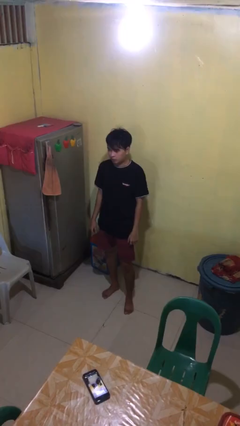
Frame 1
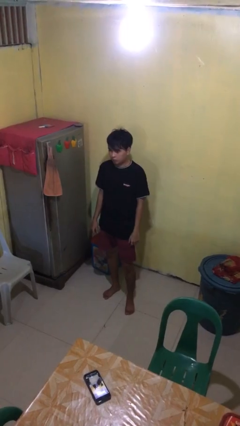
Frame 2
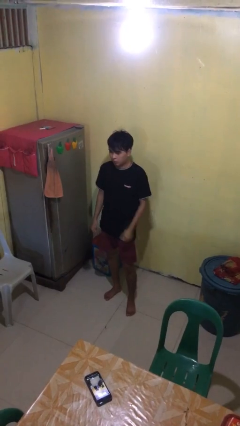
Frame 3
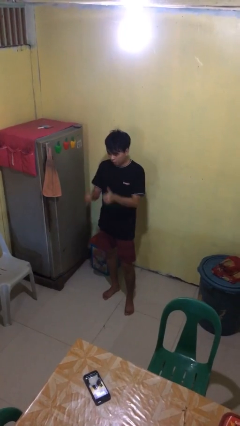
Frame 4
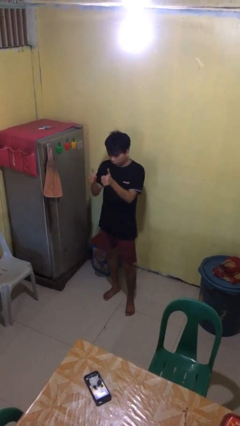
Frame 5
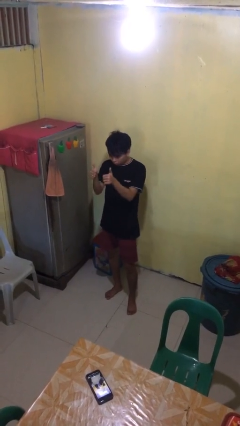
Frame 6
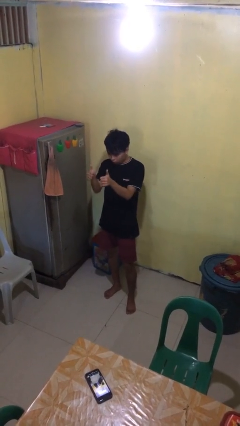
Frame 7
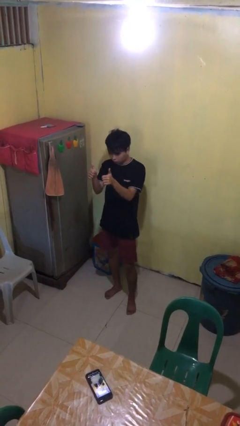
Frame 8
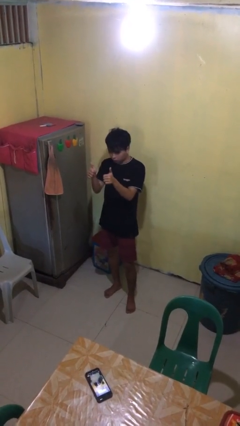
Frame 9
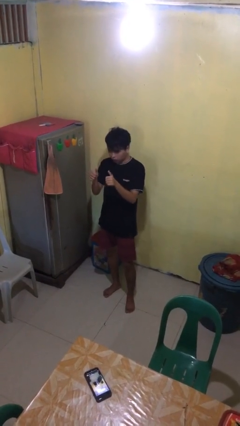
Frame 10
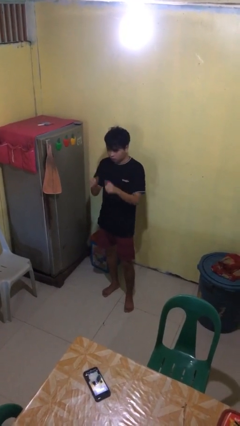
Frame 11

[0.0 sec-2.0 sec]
person gestures thumbs up

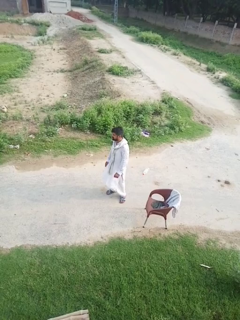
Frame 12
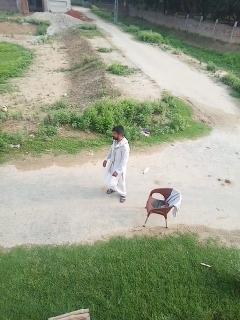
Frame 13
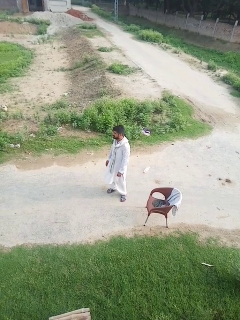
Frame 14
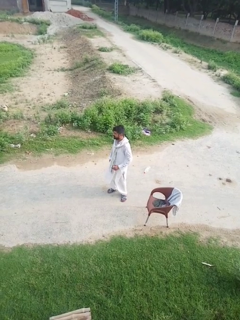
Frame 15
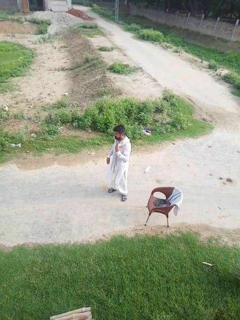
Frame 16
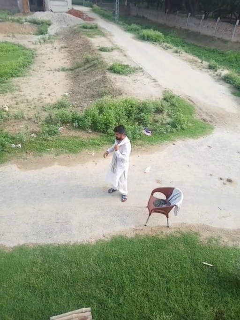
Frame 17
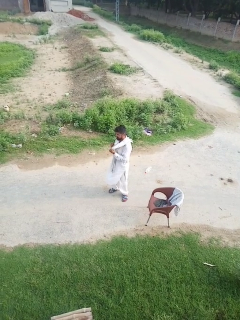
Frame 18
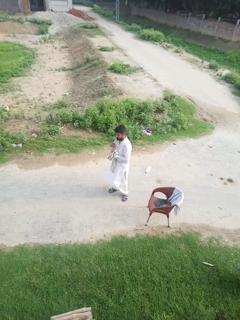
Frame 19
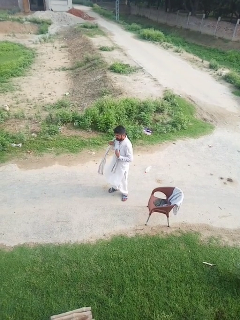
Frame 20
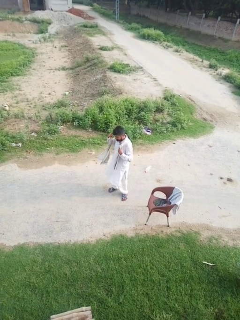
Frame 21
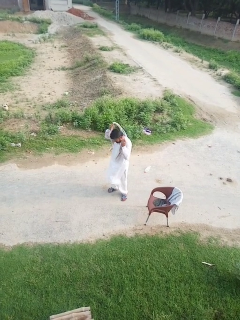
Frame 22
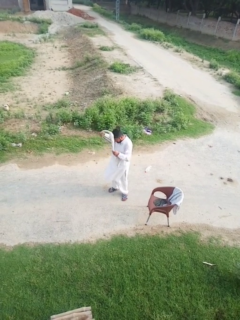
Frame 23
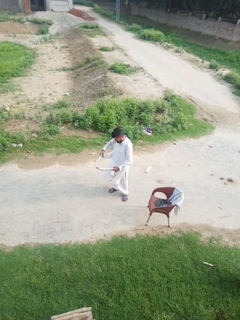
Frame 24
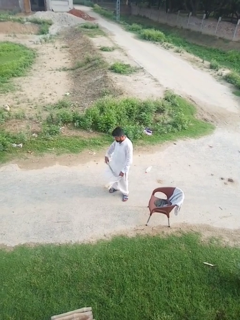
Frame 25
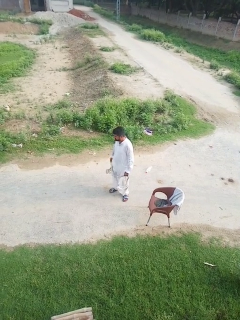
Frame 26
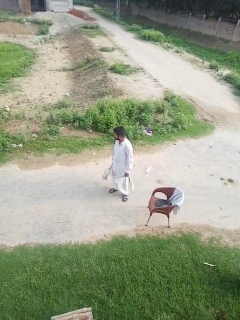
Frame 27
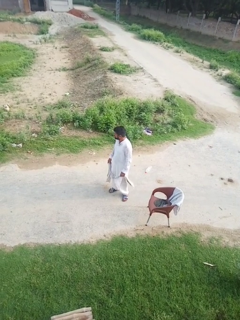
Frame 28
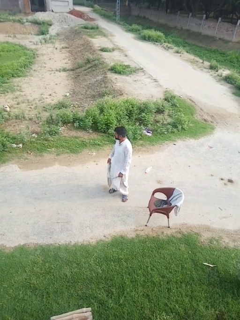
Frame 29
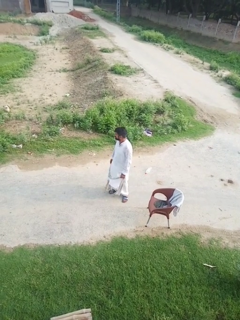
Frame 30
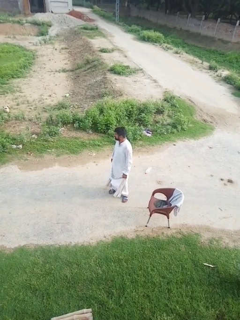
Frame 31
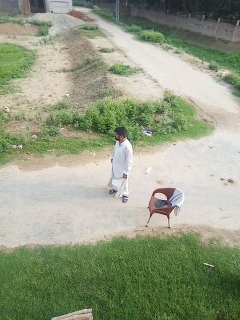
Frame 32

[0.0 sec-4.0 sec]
person takes off scarf

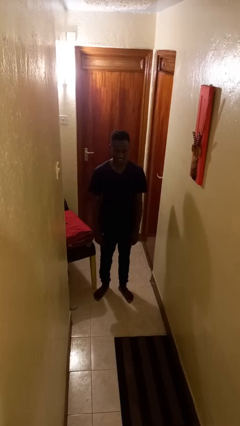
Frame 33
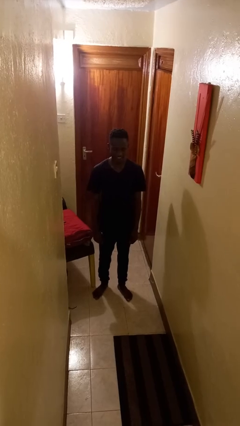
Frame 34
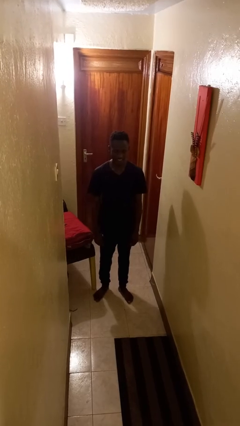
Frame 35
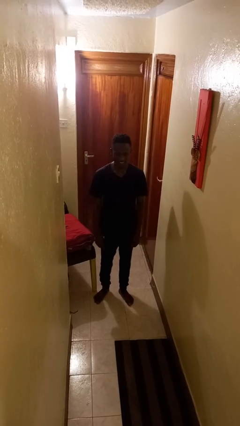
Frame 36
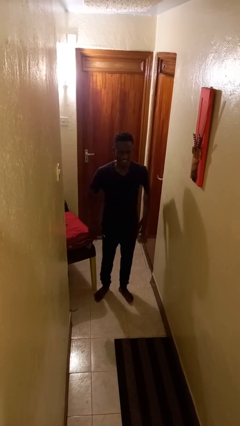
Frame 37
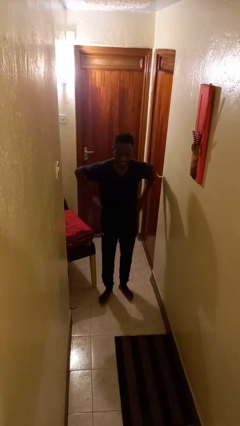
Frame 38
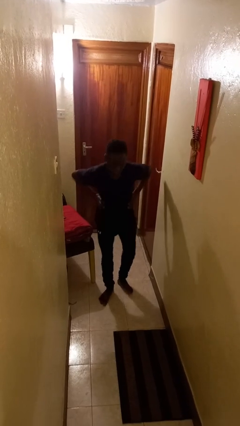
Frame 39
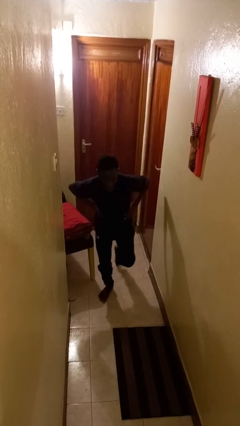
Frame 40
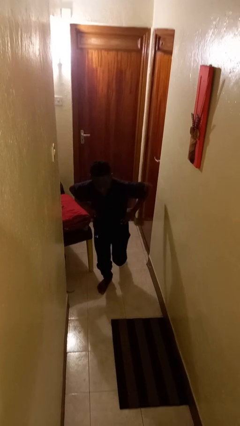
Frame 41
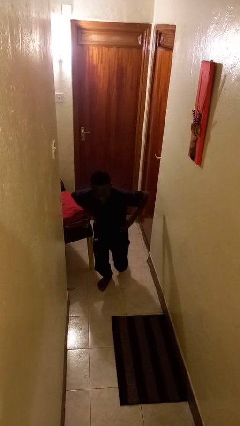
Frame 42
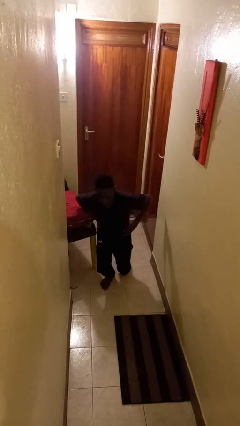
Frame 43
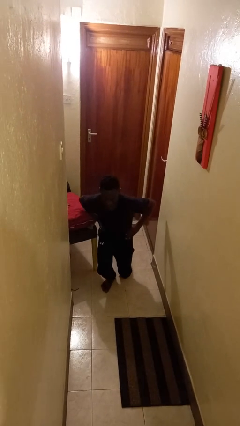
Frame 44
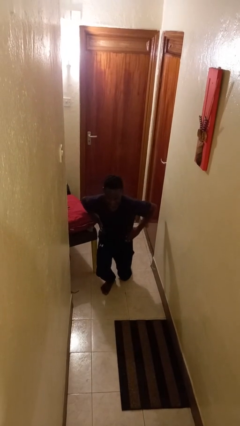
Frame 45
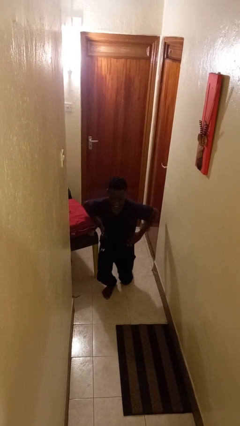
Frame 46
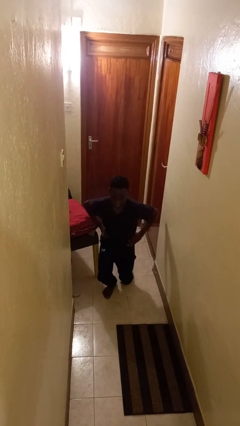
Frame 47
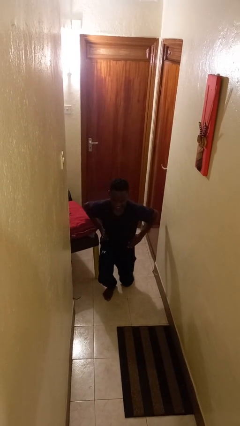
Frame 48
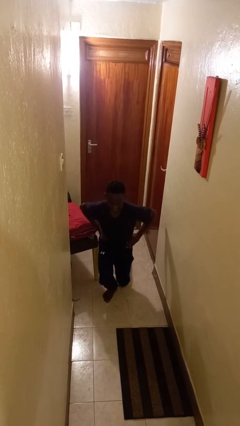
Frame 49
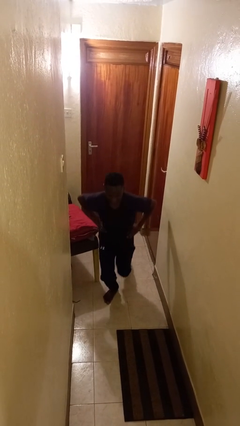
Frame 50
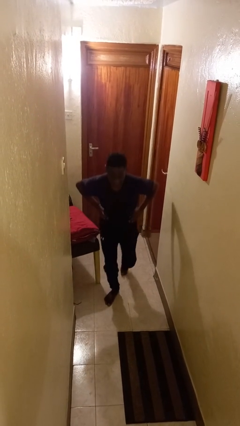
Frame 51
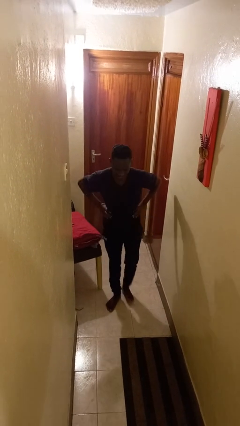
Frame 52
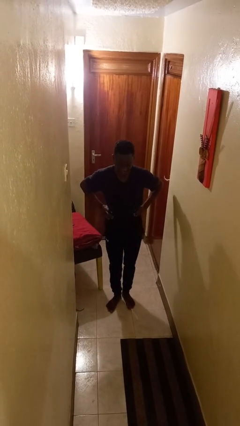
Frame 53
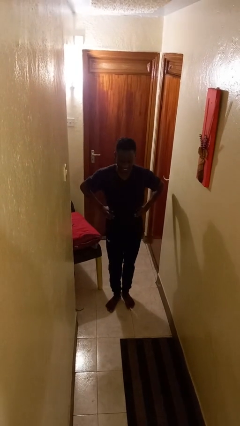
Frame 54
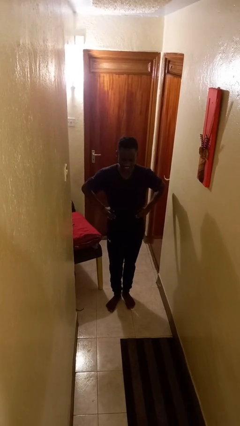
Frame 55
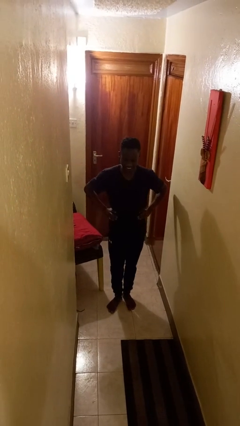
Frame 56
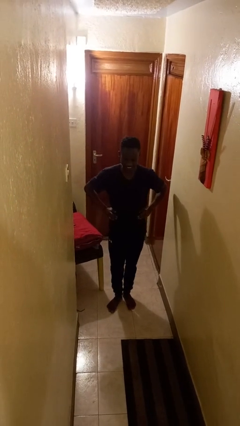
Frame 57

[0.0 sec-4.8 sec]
person exercises with lunges

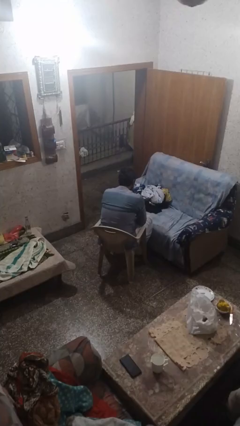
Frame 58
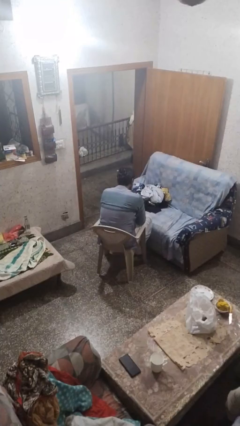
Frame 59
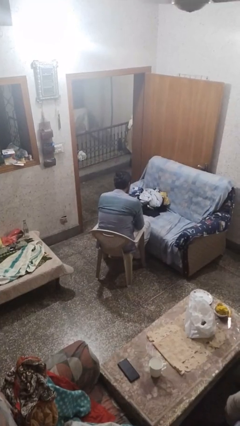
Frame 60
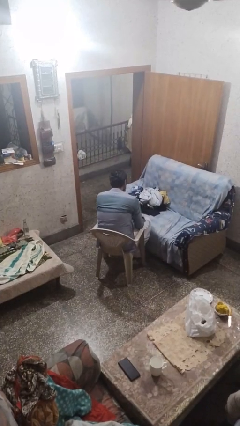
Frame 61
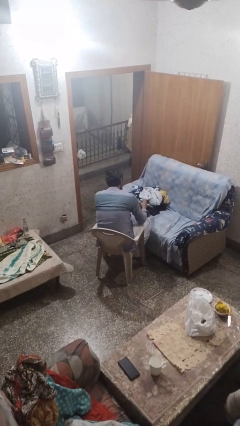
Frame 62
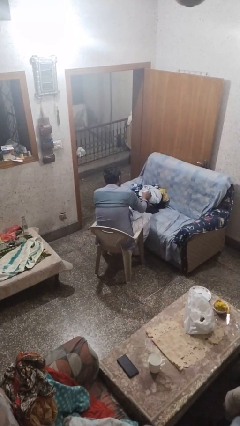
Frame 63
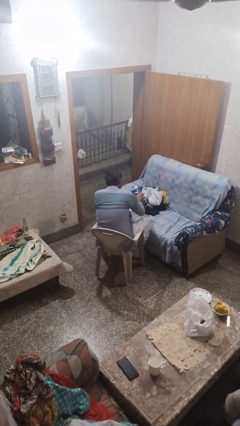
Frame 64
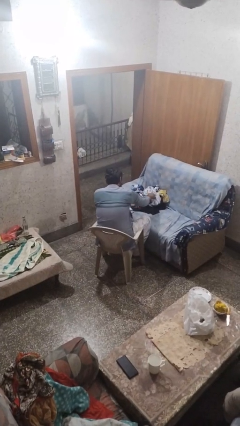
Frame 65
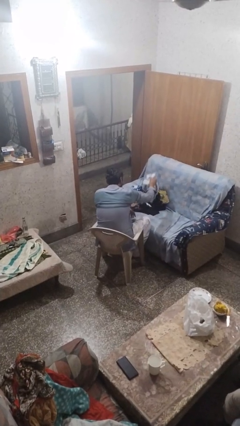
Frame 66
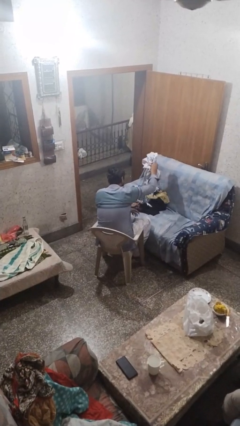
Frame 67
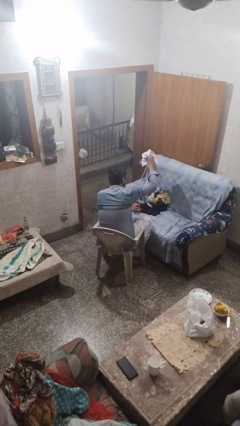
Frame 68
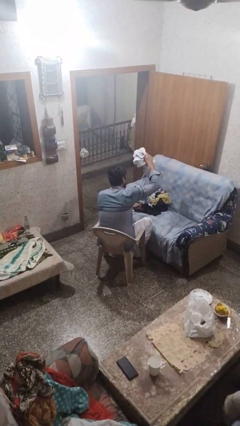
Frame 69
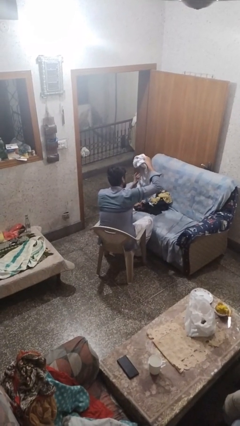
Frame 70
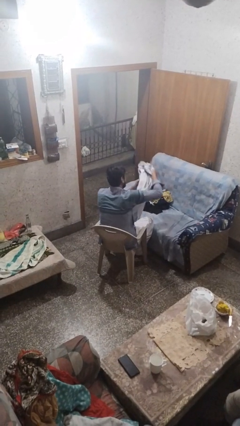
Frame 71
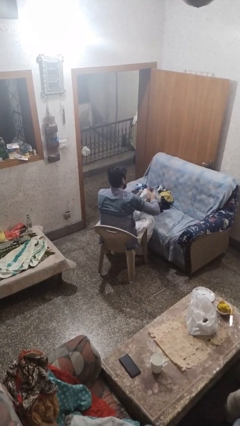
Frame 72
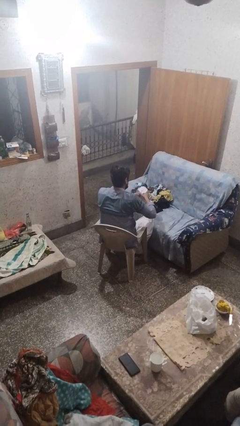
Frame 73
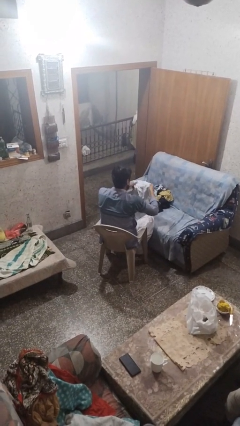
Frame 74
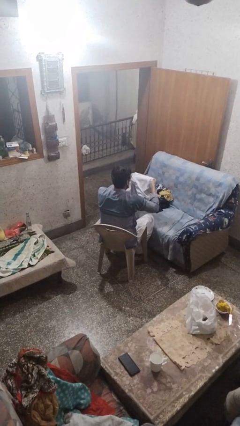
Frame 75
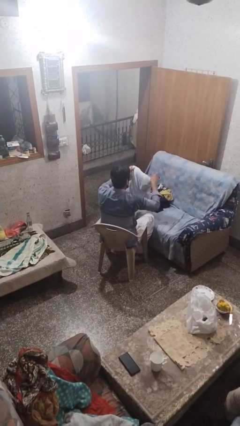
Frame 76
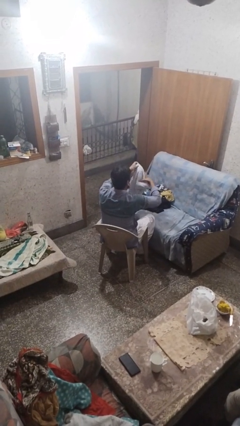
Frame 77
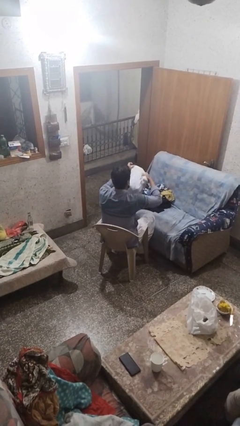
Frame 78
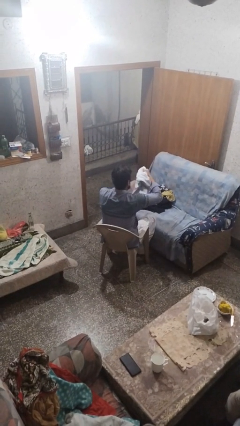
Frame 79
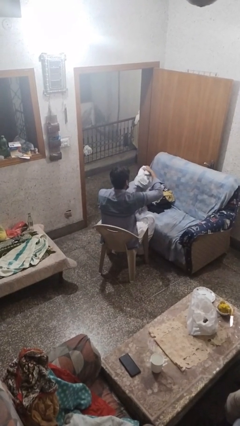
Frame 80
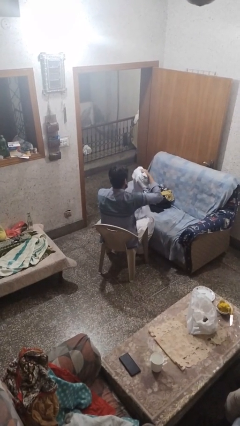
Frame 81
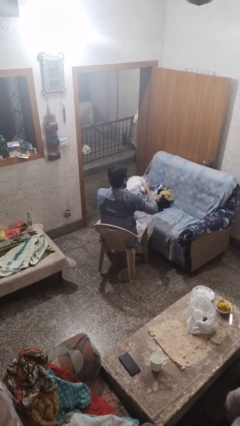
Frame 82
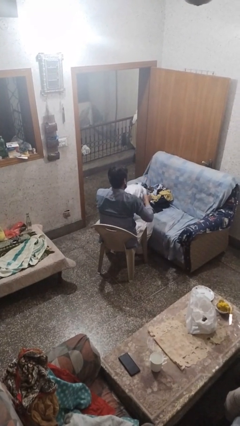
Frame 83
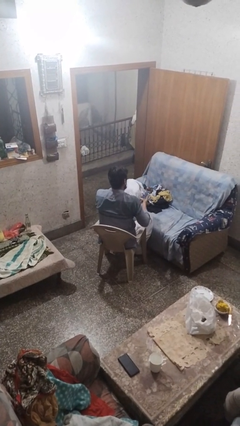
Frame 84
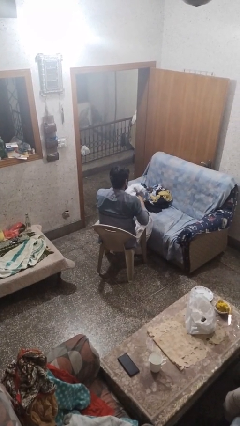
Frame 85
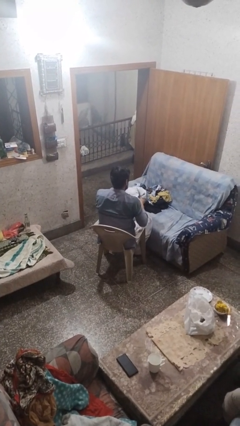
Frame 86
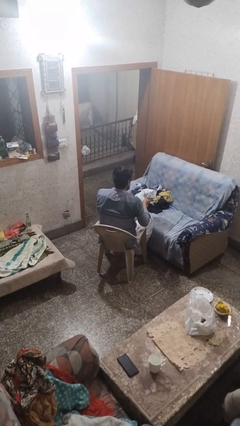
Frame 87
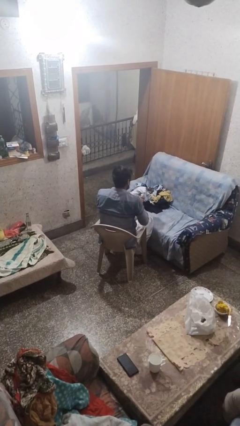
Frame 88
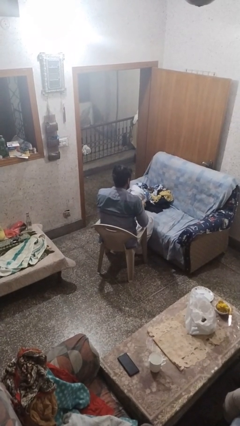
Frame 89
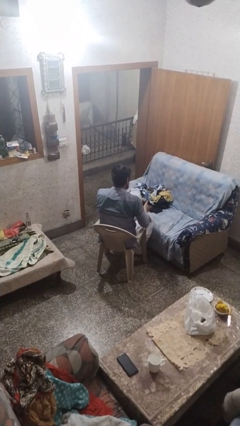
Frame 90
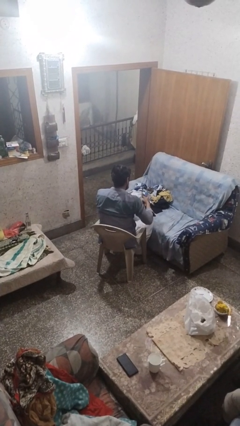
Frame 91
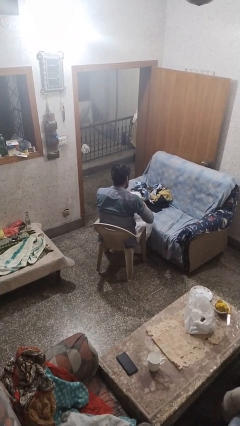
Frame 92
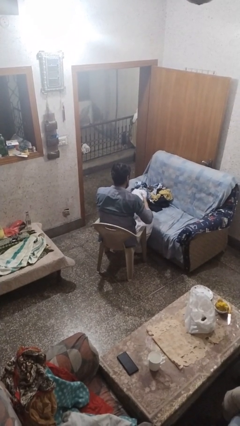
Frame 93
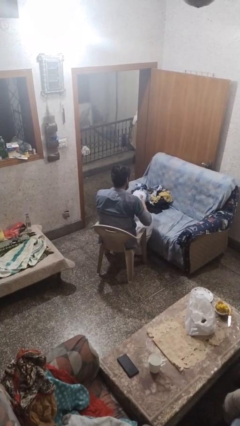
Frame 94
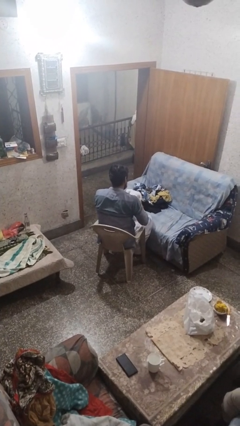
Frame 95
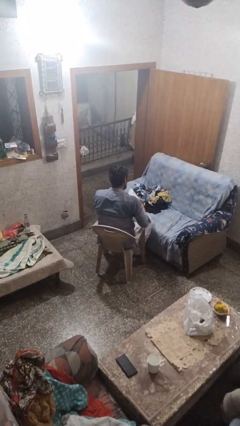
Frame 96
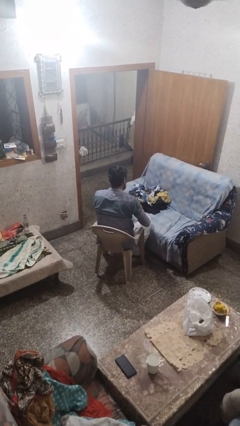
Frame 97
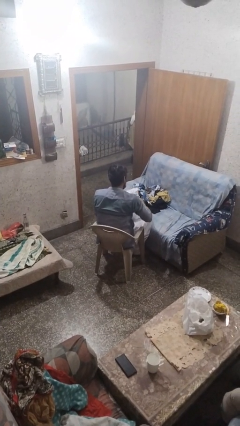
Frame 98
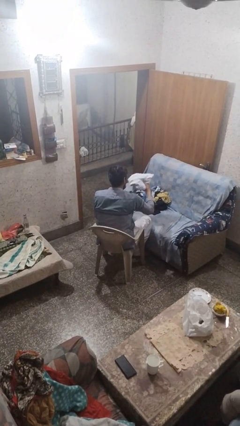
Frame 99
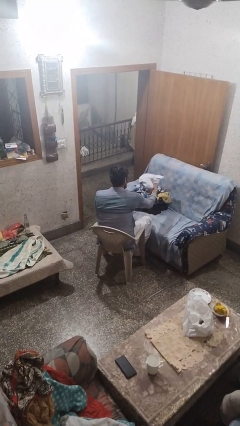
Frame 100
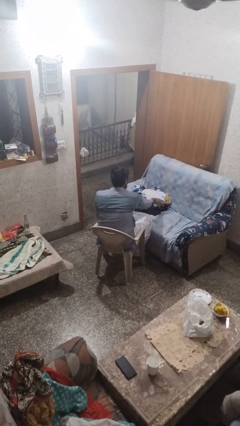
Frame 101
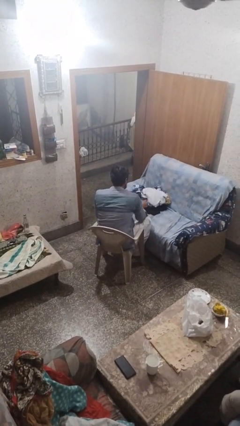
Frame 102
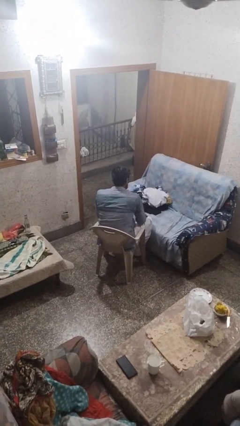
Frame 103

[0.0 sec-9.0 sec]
person folds shirt
